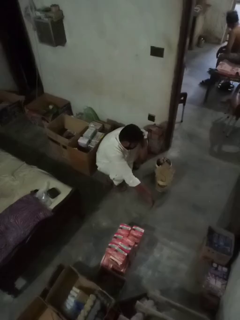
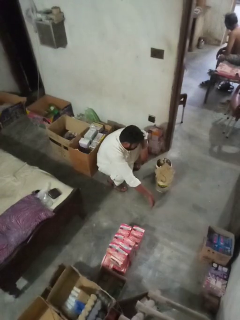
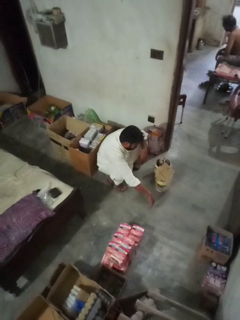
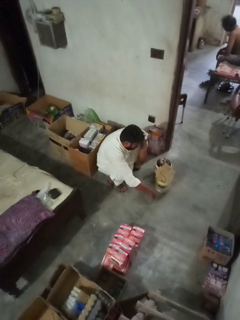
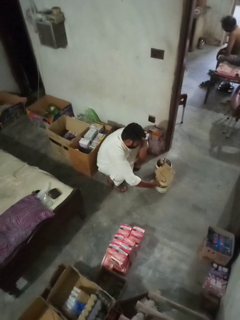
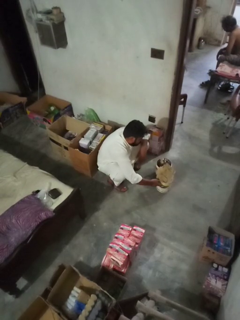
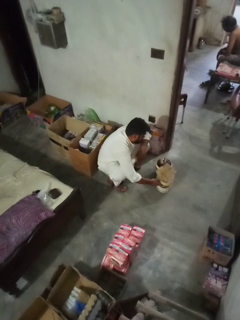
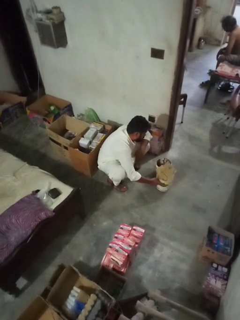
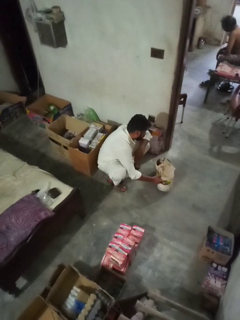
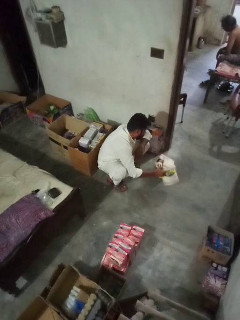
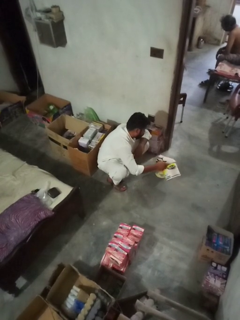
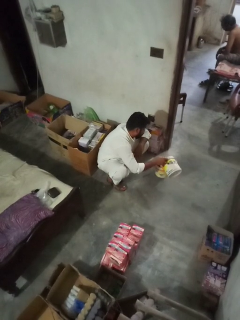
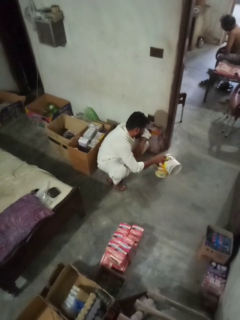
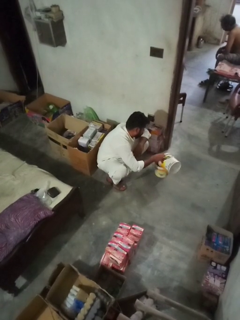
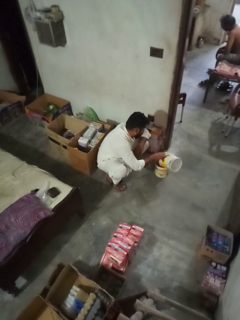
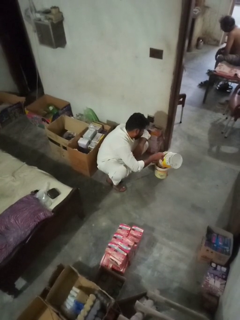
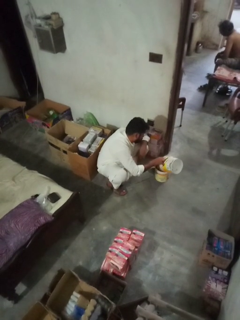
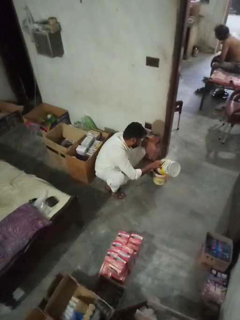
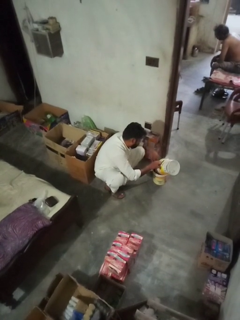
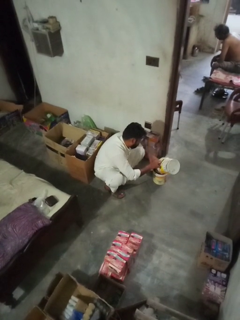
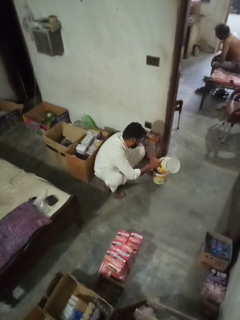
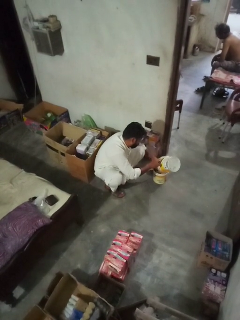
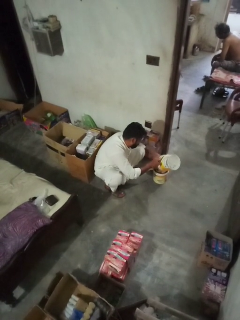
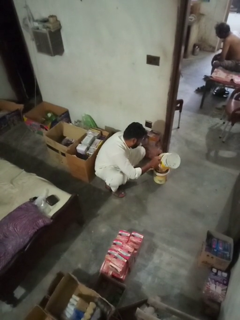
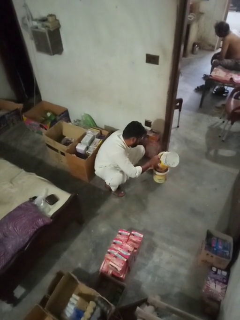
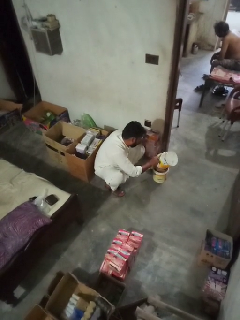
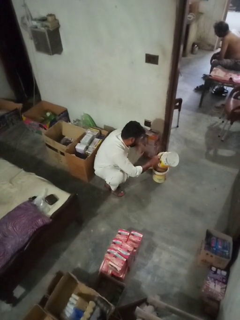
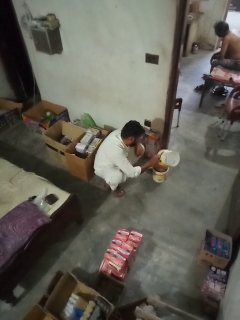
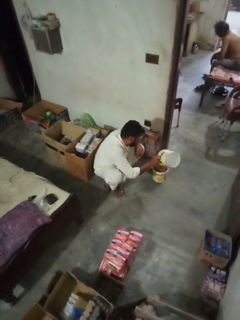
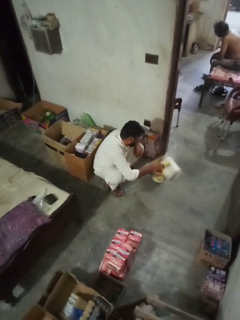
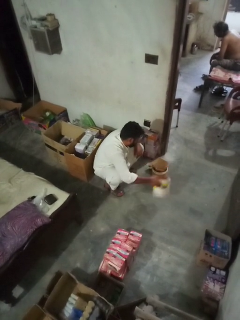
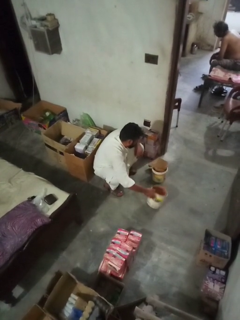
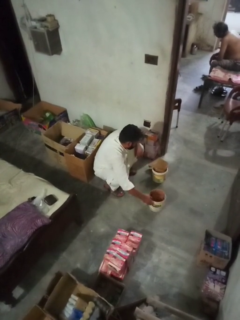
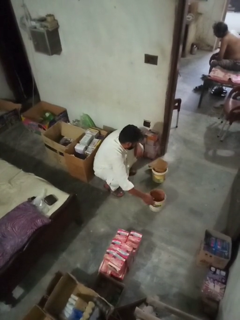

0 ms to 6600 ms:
person removes trashbag from trashcan

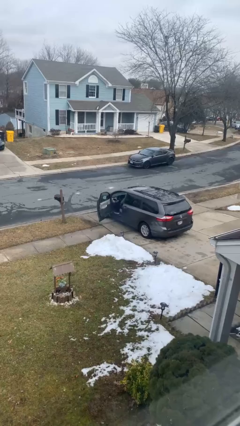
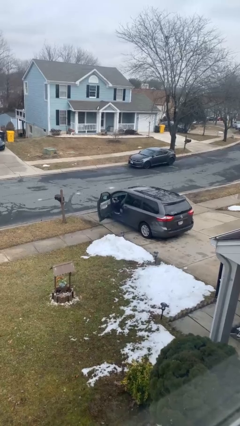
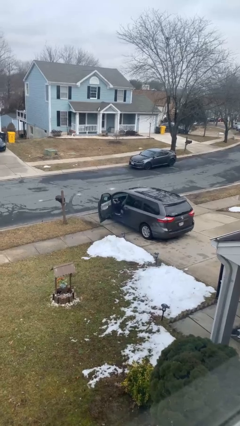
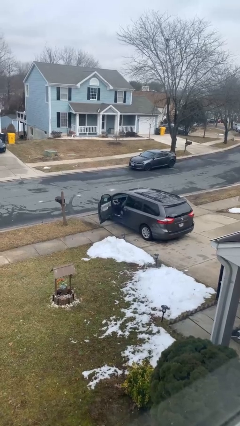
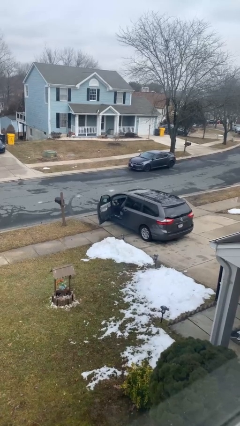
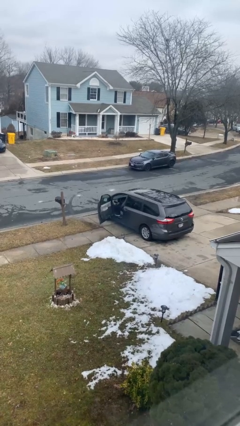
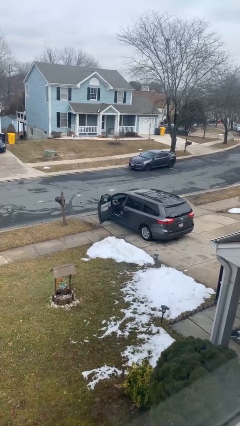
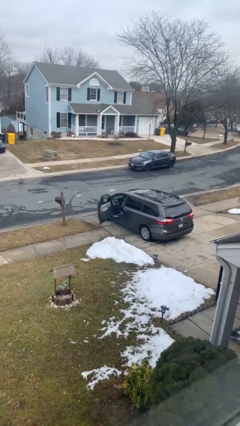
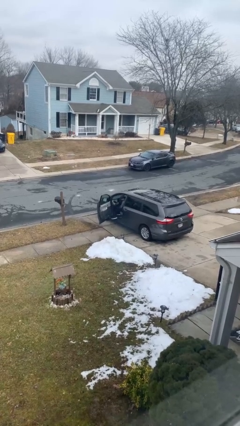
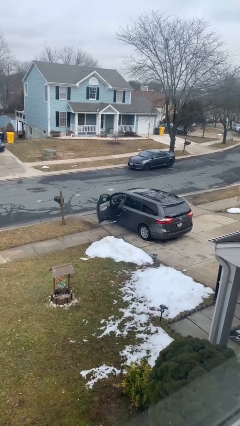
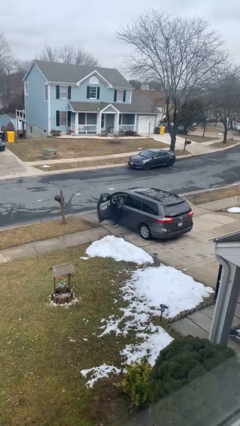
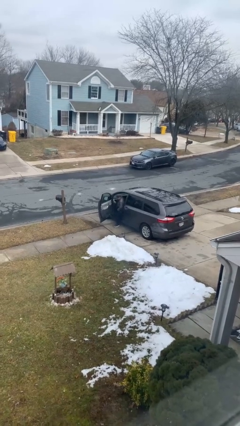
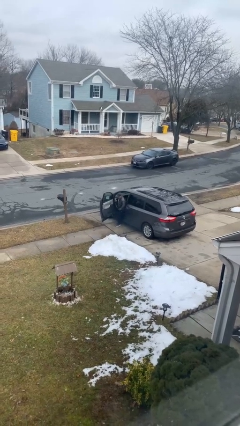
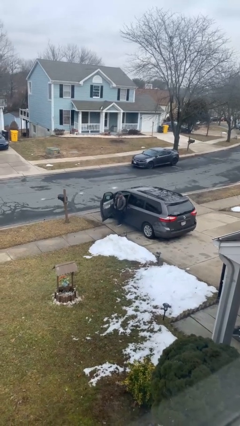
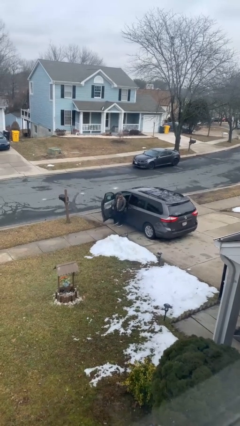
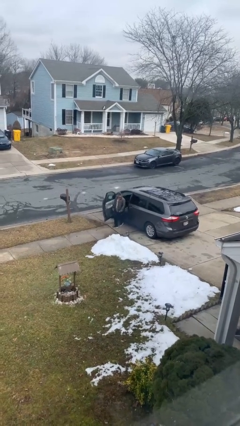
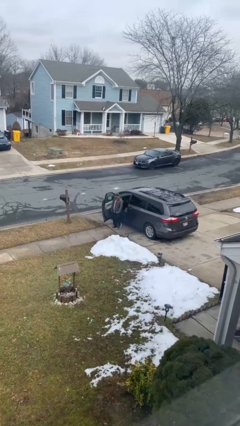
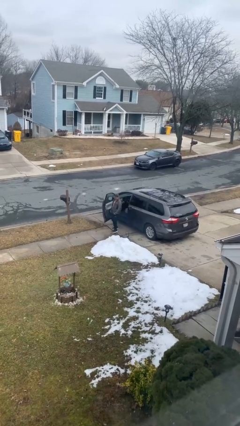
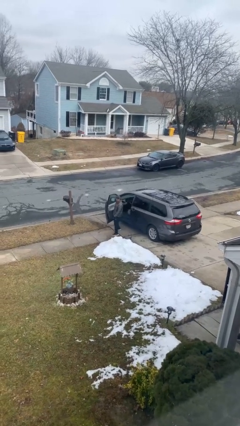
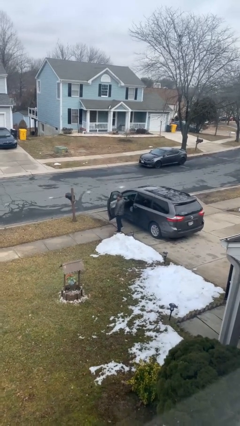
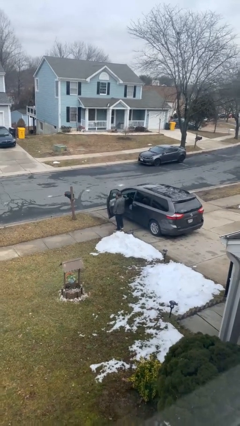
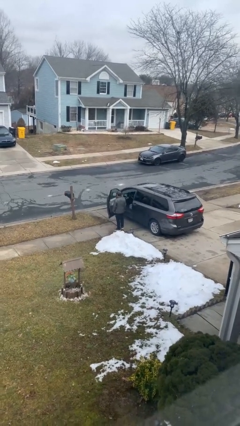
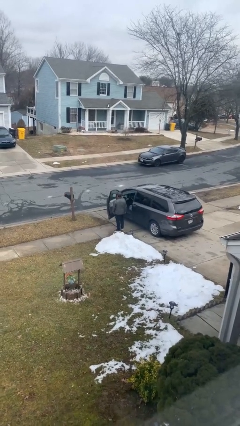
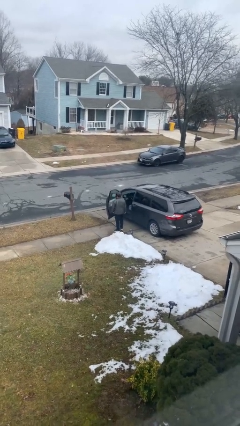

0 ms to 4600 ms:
person exits car

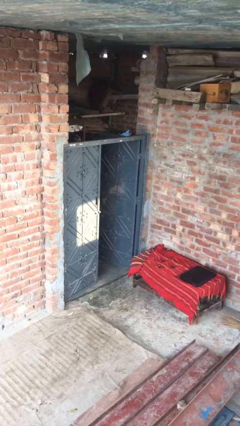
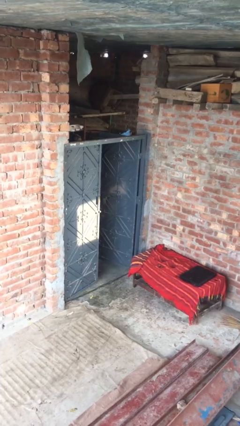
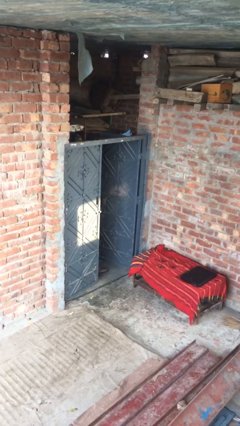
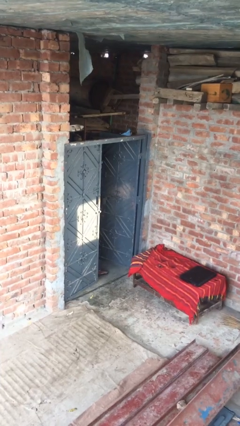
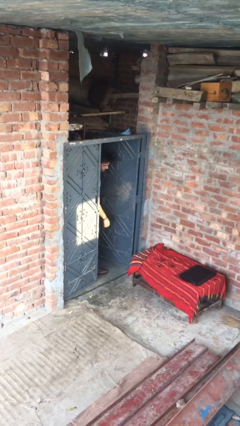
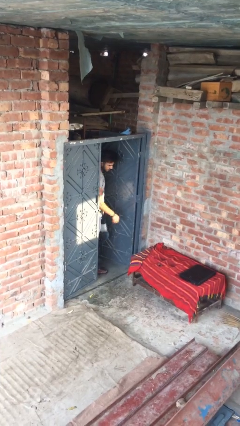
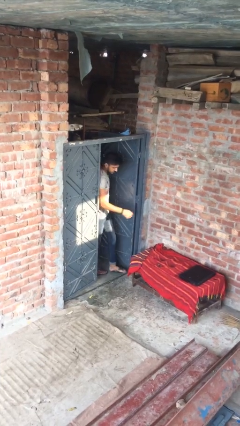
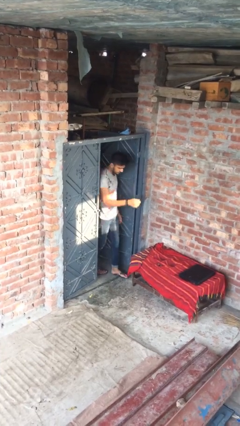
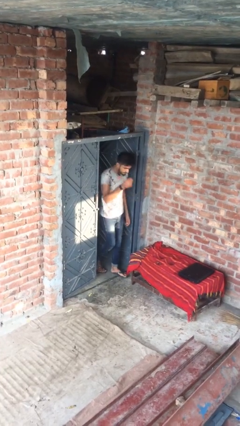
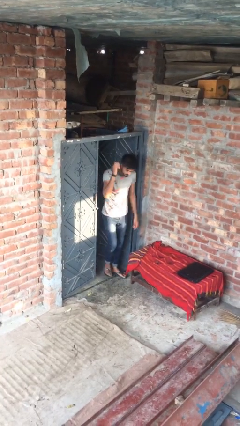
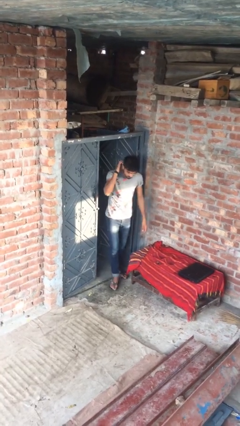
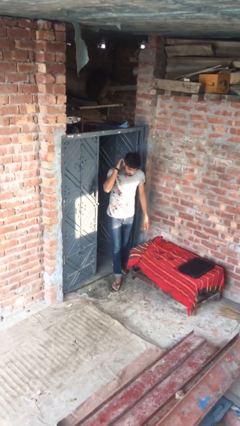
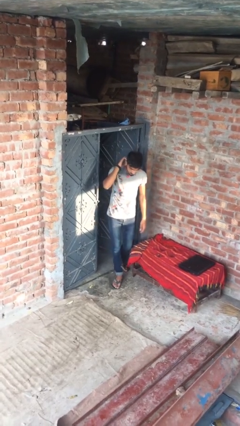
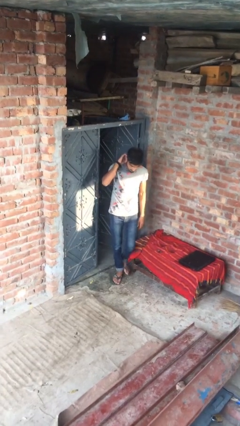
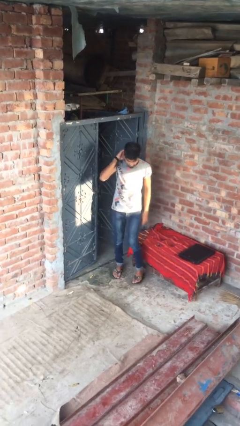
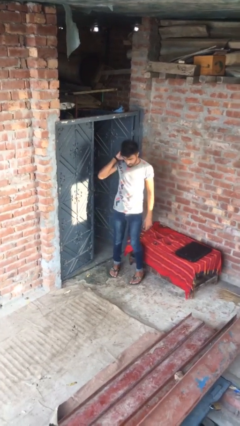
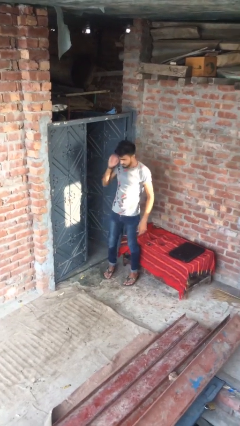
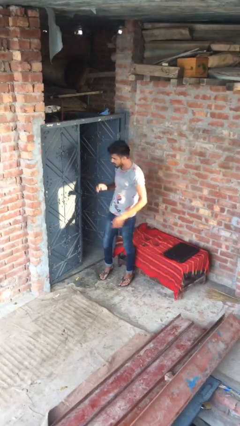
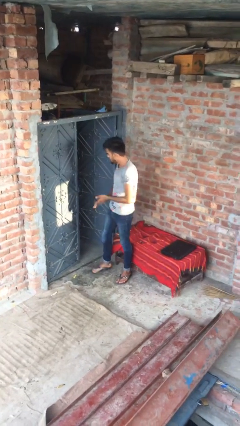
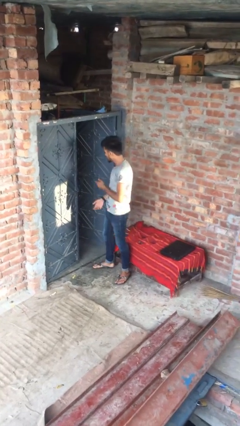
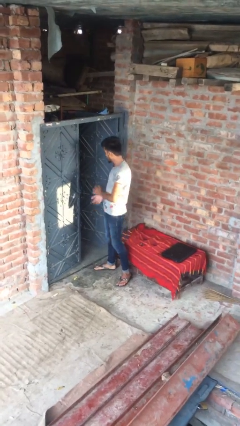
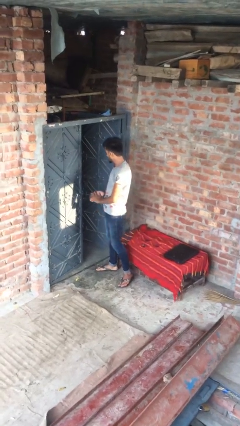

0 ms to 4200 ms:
person enters scene through structure

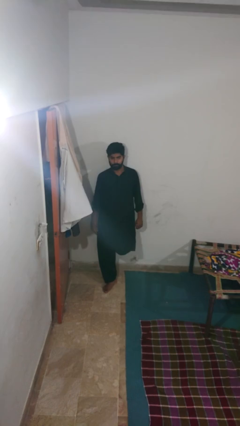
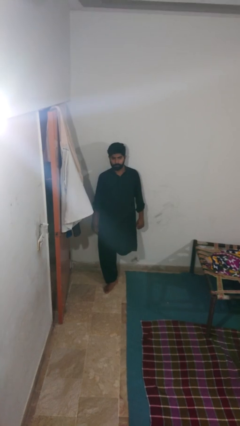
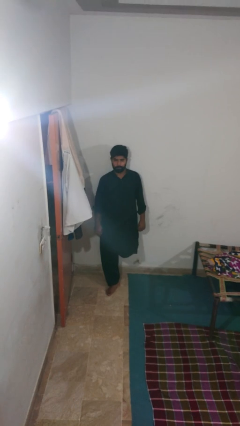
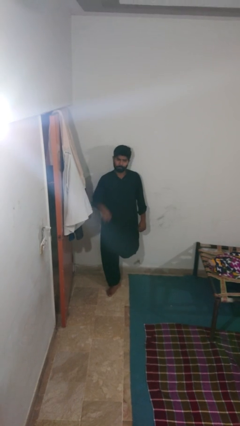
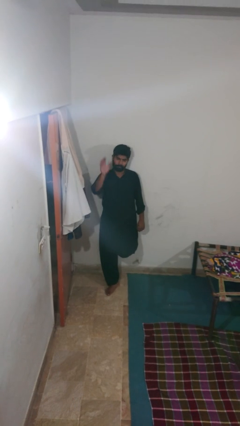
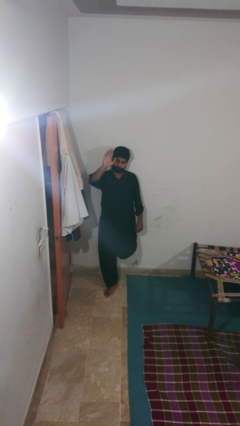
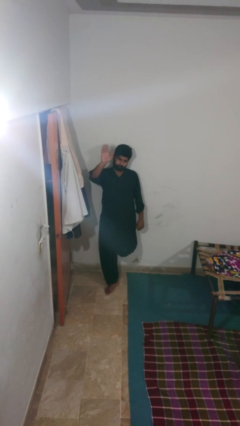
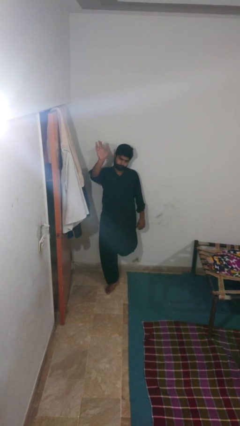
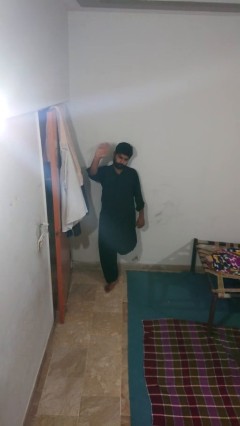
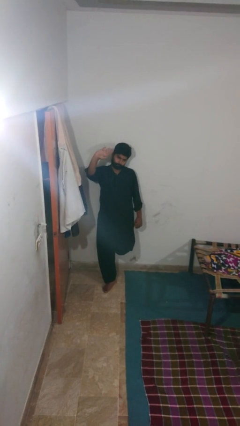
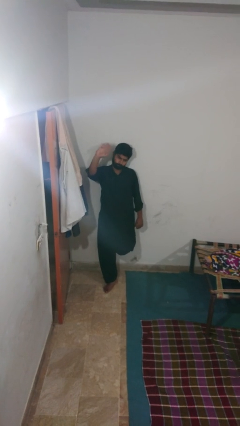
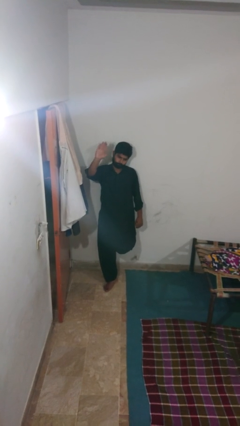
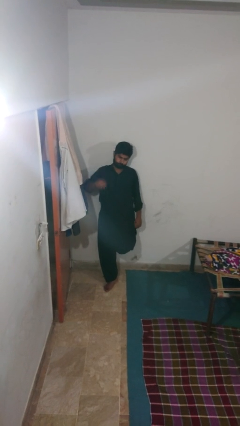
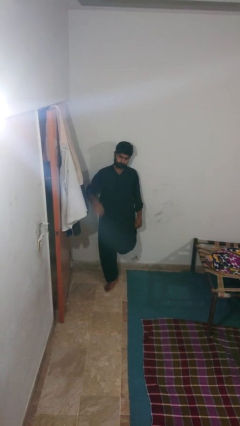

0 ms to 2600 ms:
person waves at person

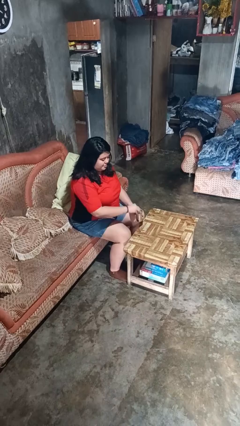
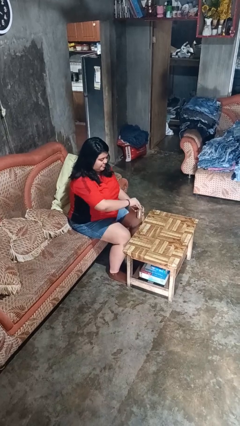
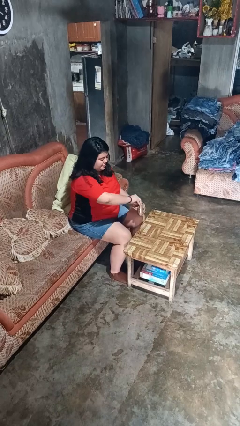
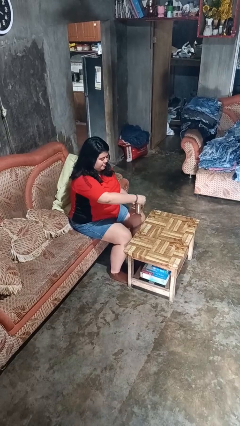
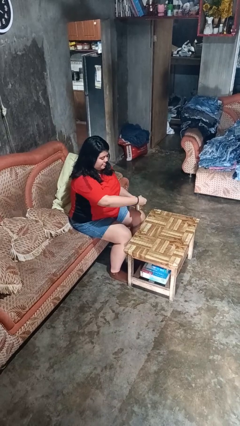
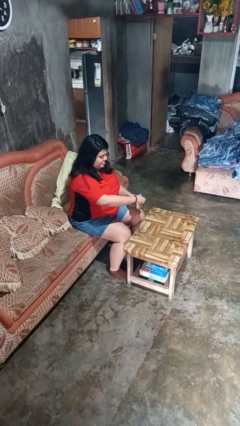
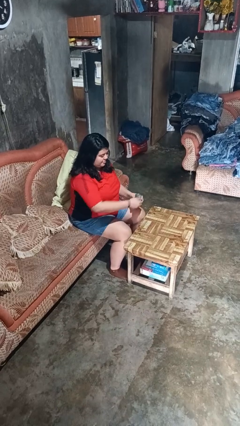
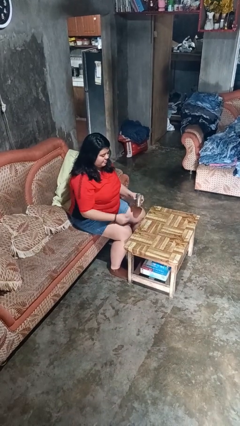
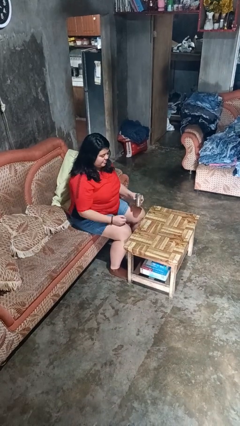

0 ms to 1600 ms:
person opens beverage can
